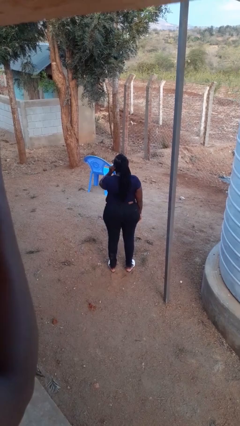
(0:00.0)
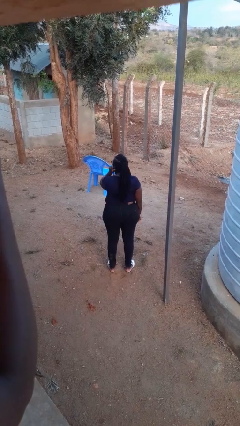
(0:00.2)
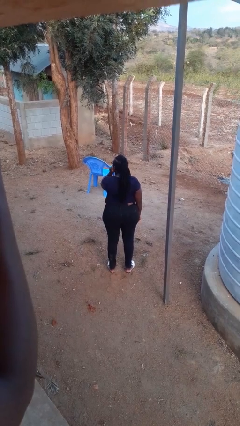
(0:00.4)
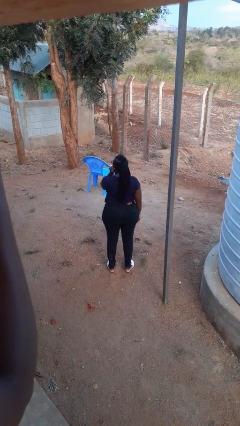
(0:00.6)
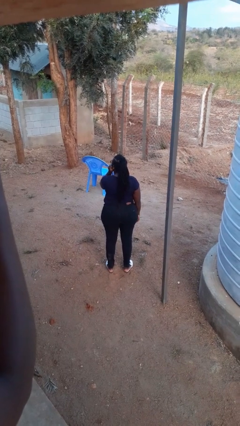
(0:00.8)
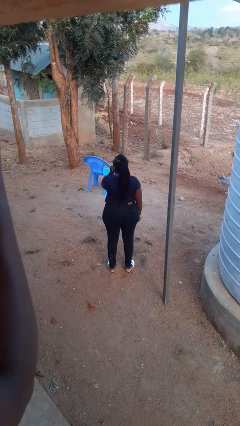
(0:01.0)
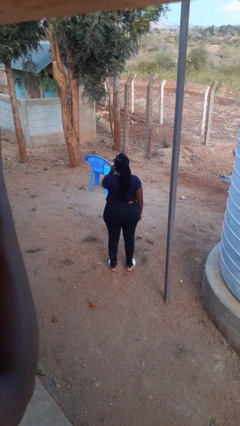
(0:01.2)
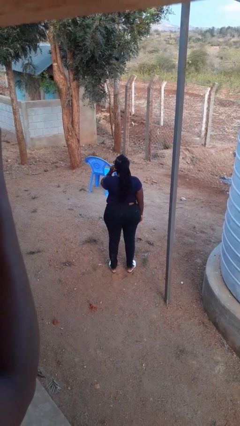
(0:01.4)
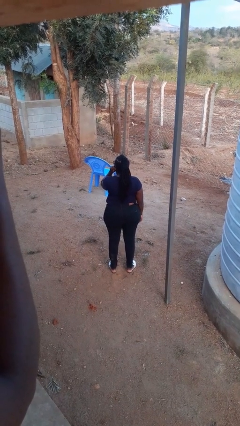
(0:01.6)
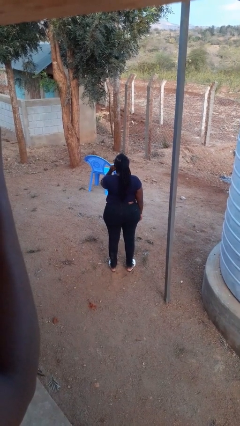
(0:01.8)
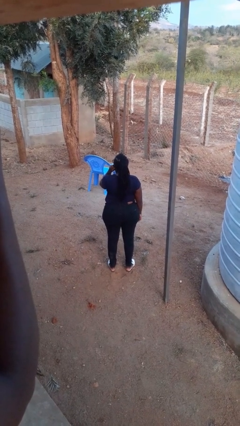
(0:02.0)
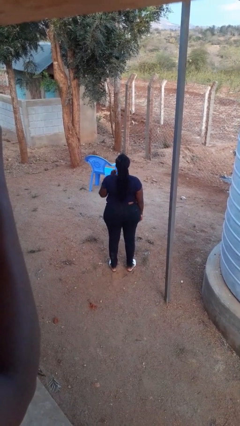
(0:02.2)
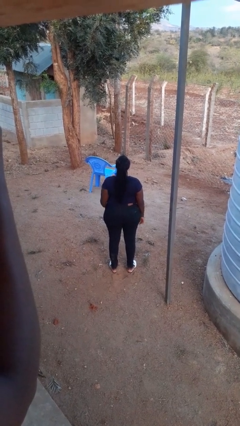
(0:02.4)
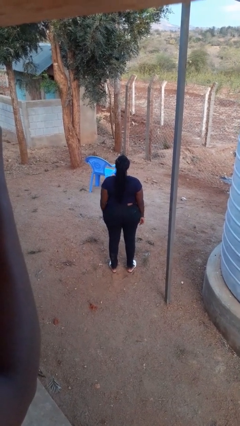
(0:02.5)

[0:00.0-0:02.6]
person touches earlobe

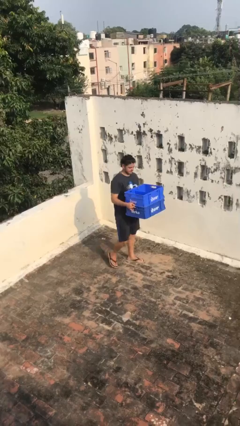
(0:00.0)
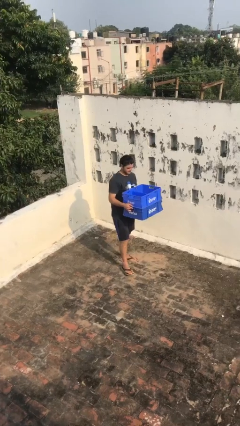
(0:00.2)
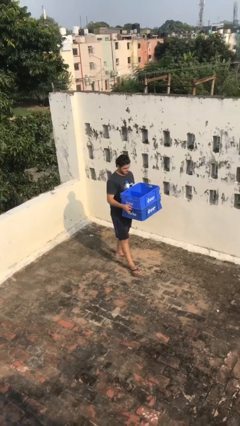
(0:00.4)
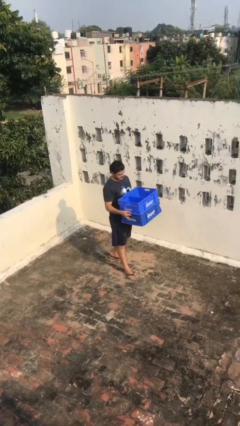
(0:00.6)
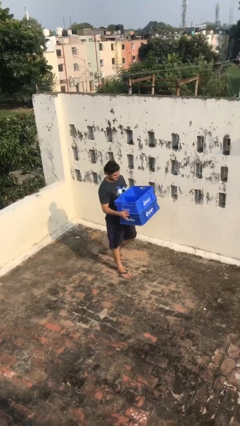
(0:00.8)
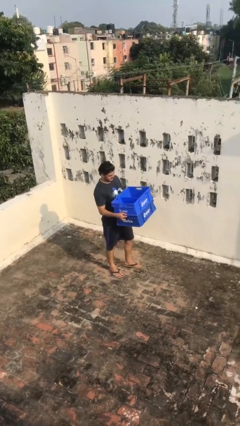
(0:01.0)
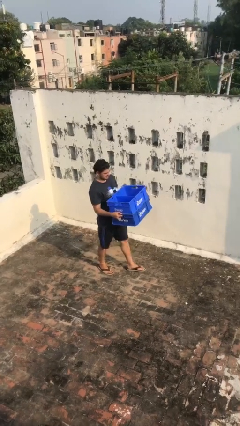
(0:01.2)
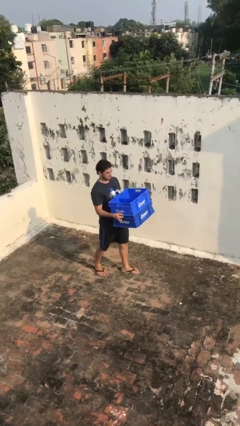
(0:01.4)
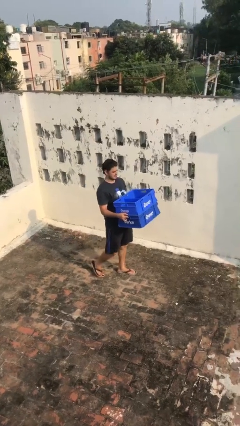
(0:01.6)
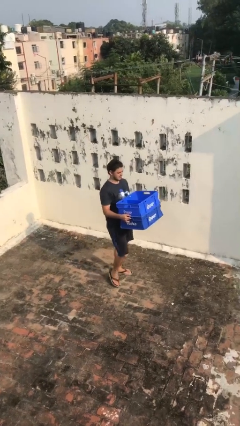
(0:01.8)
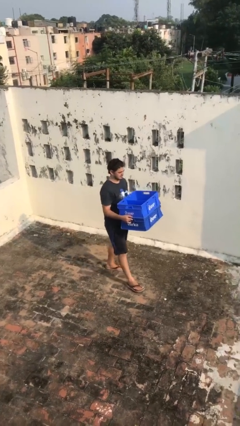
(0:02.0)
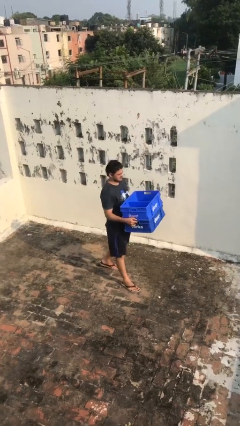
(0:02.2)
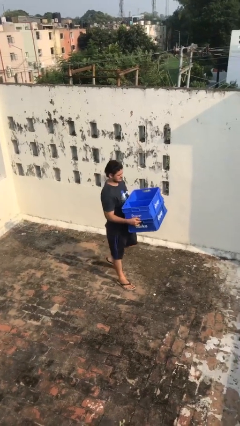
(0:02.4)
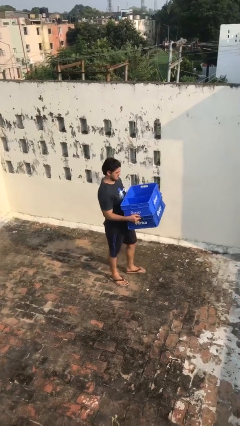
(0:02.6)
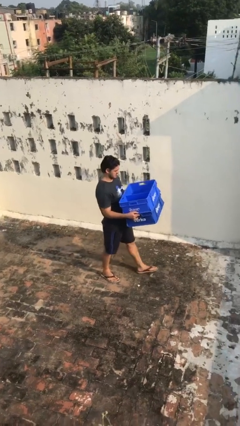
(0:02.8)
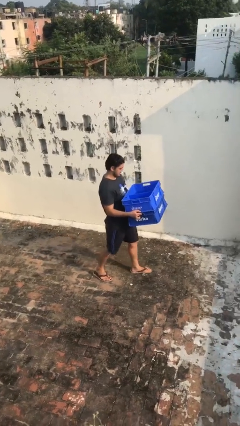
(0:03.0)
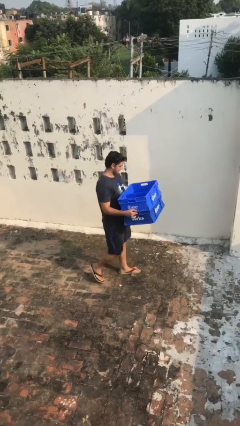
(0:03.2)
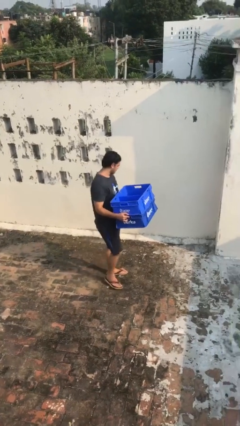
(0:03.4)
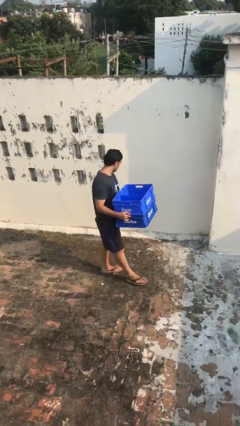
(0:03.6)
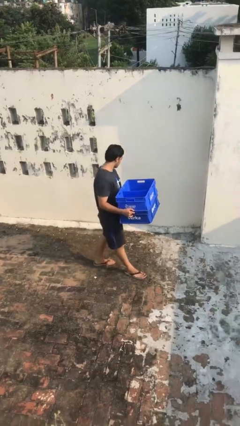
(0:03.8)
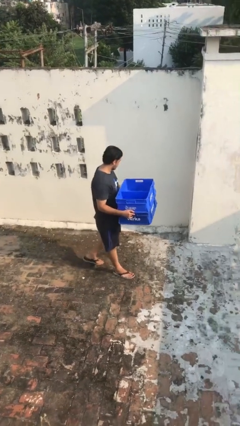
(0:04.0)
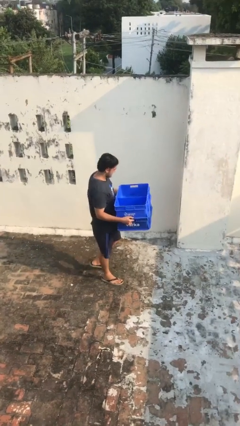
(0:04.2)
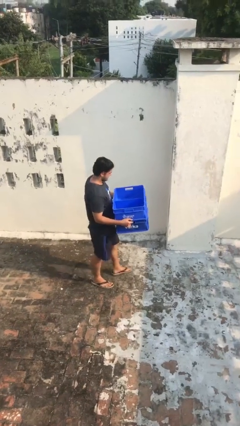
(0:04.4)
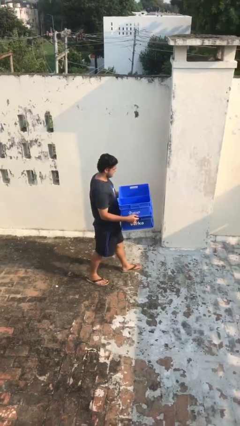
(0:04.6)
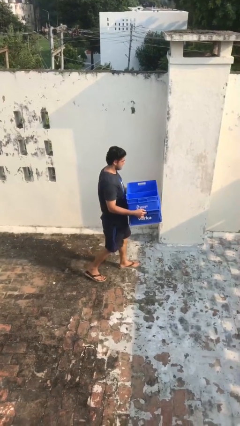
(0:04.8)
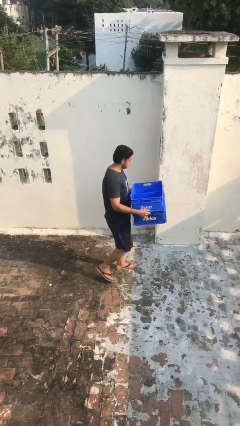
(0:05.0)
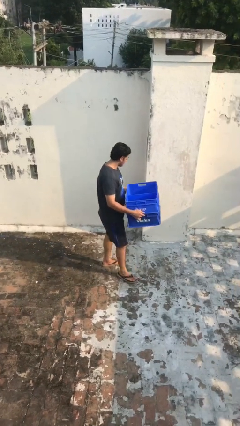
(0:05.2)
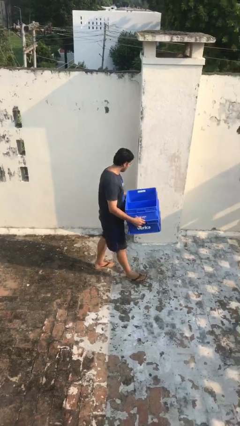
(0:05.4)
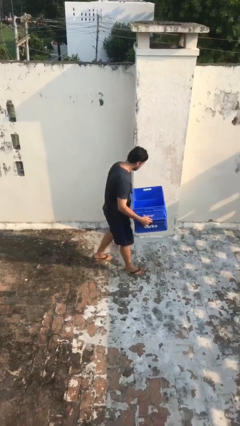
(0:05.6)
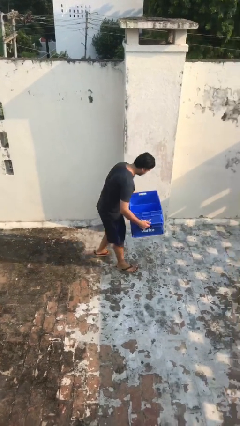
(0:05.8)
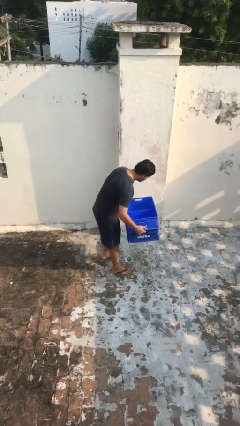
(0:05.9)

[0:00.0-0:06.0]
person carries heavy object

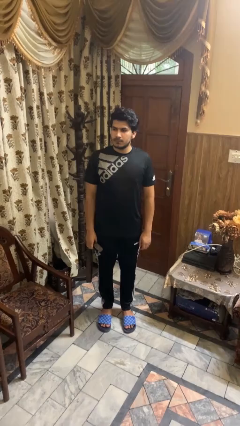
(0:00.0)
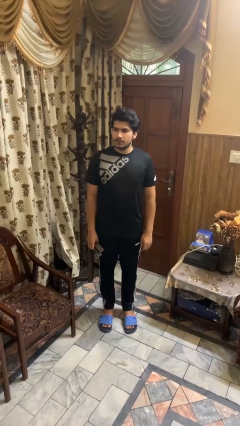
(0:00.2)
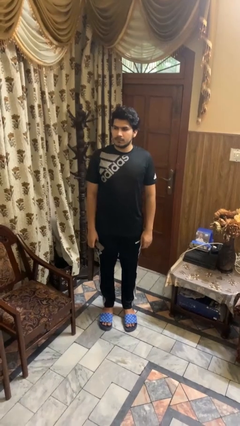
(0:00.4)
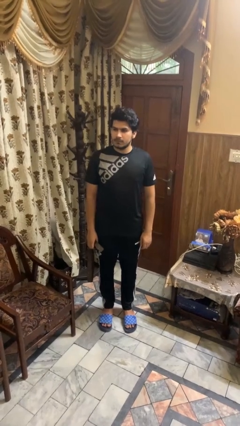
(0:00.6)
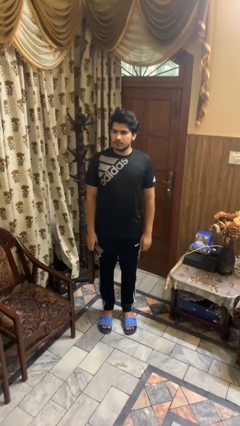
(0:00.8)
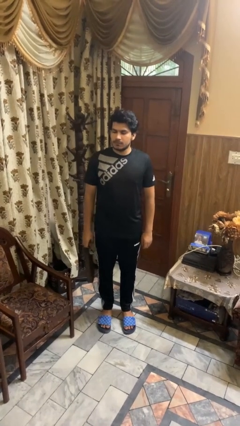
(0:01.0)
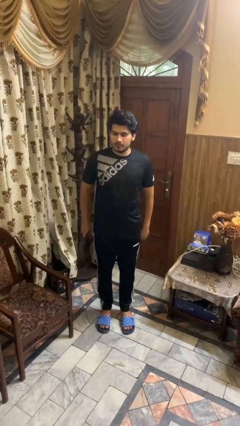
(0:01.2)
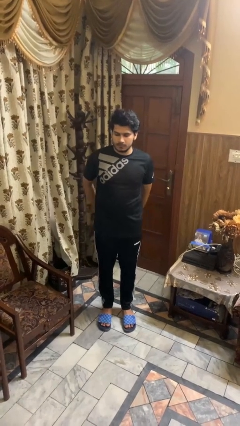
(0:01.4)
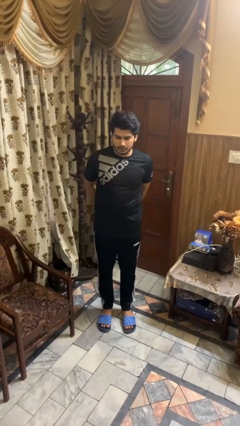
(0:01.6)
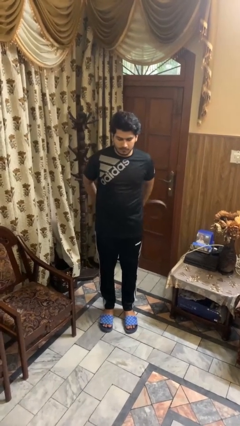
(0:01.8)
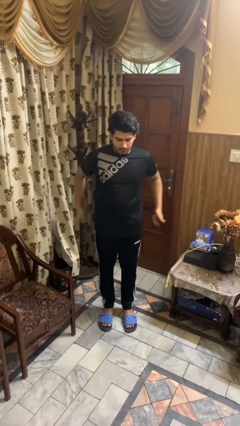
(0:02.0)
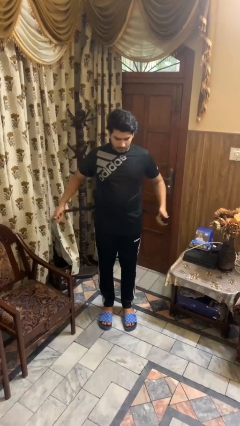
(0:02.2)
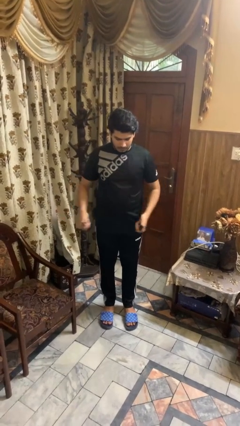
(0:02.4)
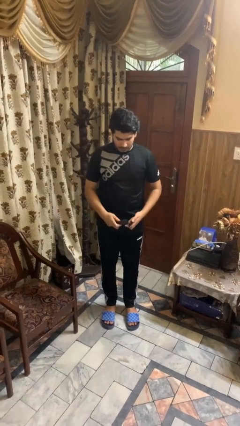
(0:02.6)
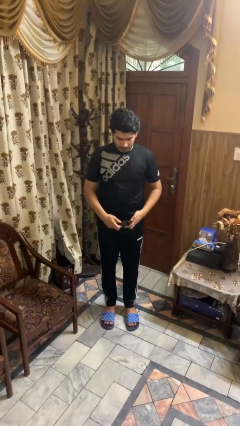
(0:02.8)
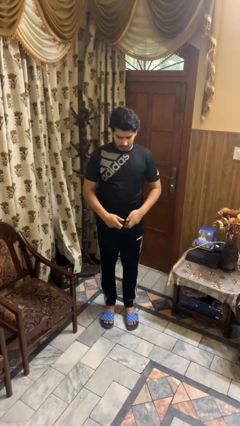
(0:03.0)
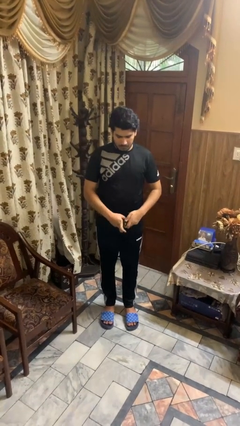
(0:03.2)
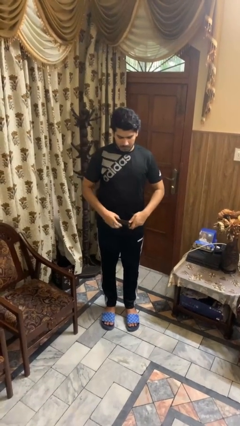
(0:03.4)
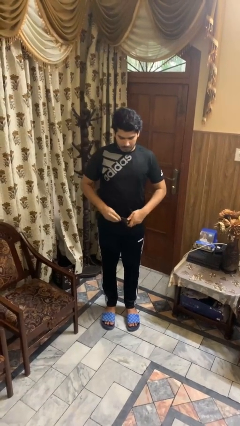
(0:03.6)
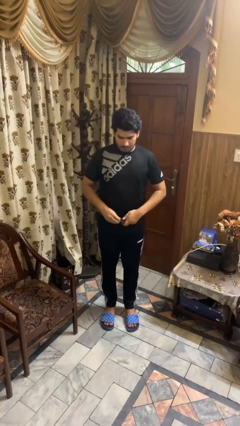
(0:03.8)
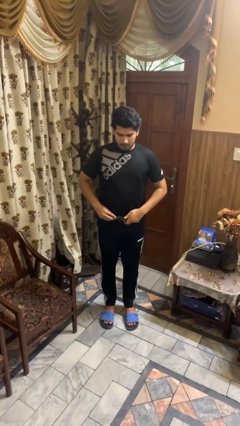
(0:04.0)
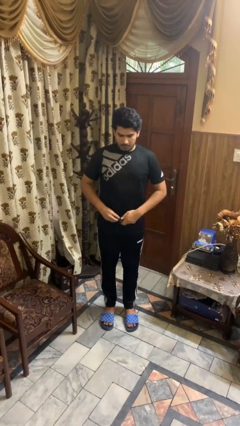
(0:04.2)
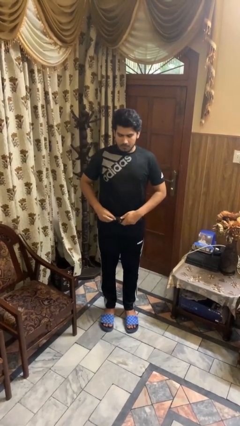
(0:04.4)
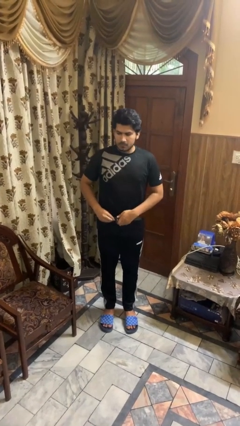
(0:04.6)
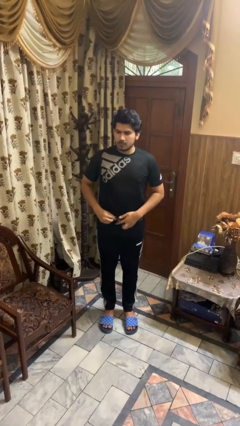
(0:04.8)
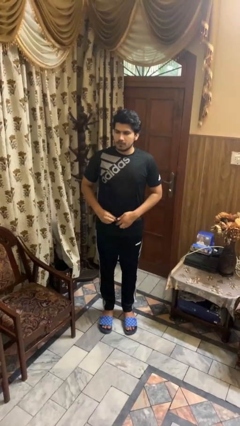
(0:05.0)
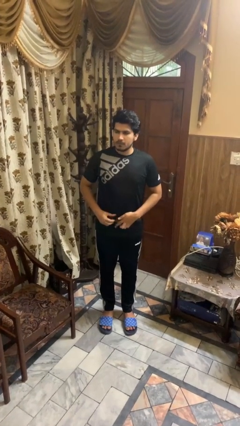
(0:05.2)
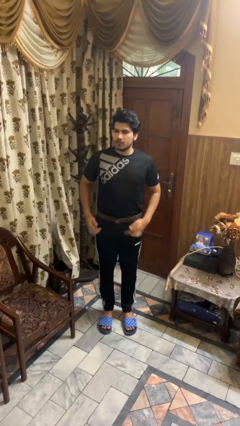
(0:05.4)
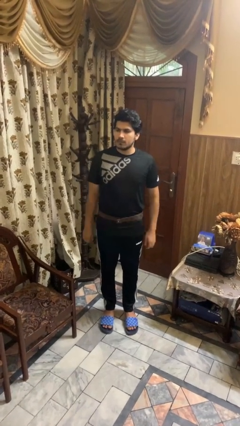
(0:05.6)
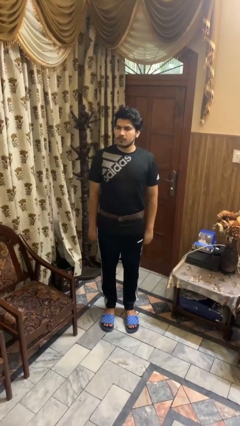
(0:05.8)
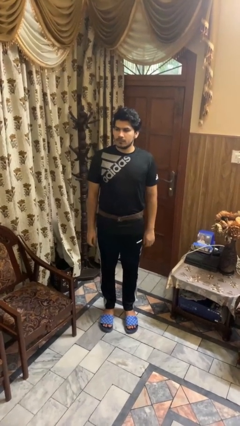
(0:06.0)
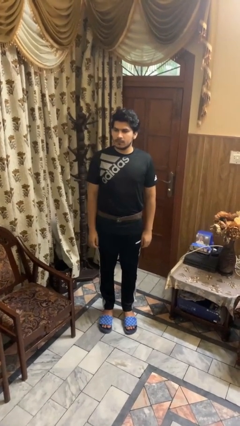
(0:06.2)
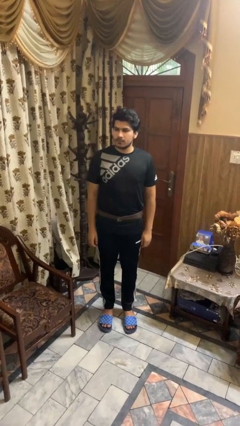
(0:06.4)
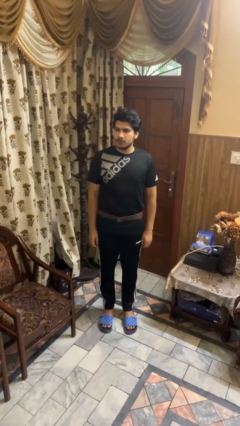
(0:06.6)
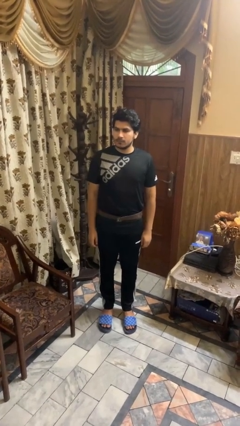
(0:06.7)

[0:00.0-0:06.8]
person puts on belt

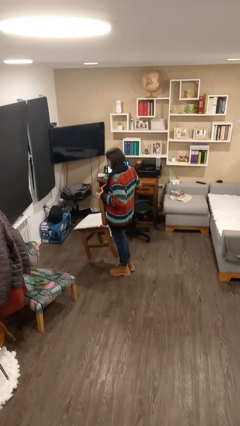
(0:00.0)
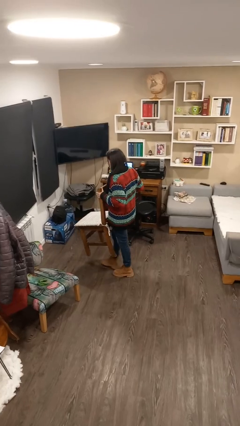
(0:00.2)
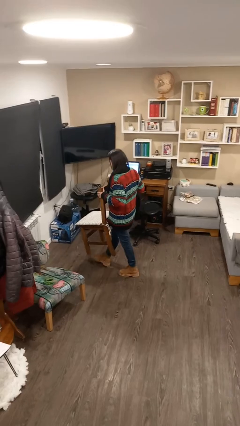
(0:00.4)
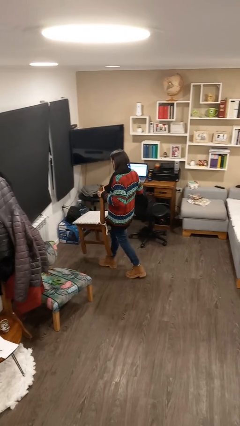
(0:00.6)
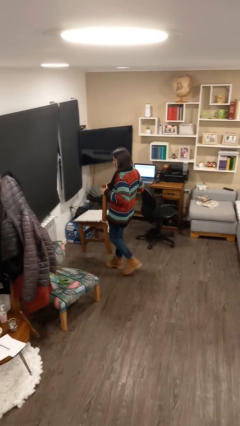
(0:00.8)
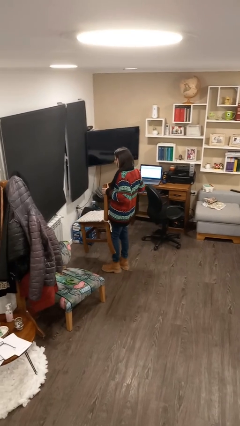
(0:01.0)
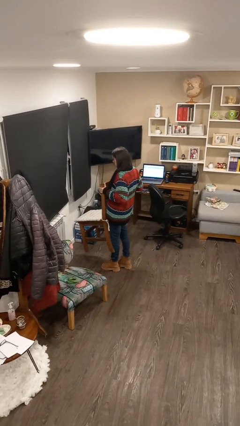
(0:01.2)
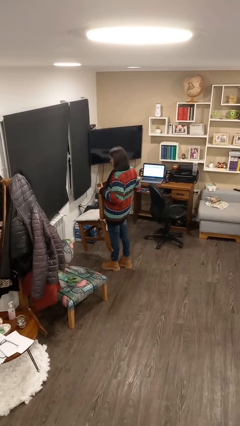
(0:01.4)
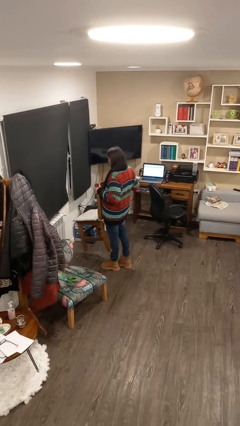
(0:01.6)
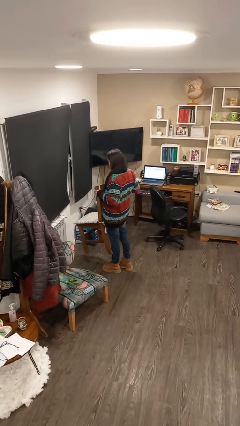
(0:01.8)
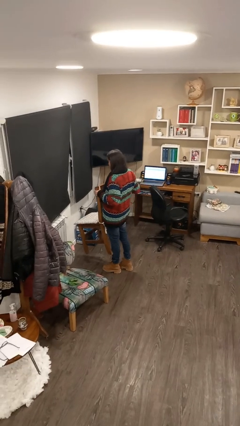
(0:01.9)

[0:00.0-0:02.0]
person carries furniture

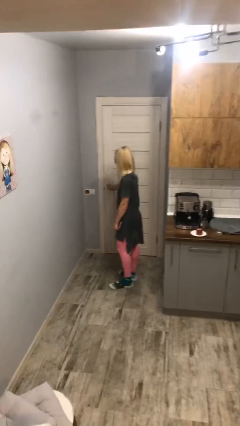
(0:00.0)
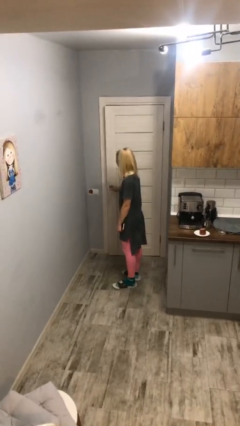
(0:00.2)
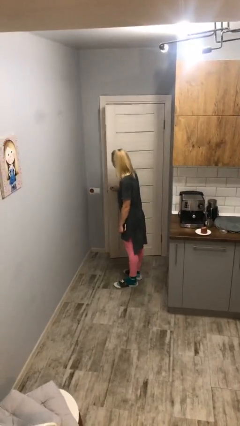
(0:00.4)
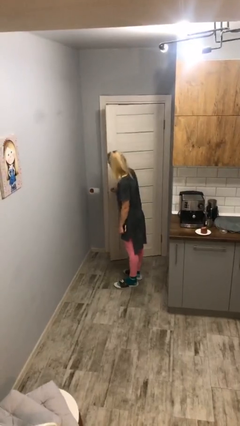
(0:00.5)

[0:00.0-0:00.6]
person opens facility door
